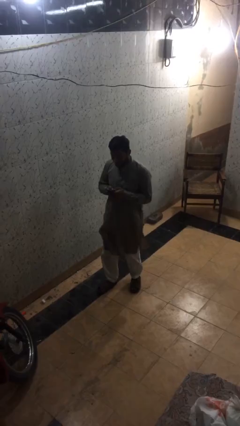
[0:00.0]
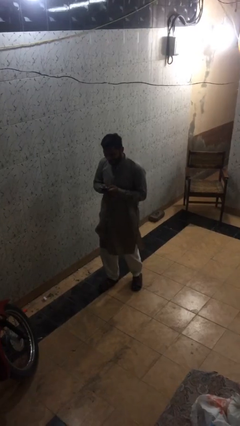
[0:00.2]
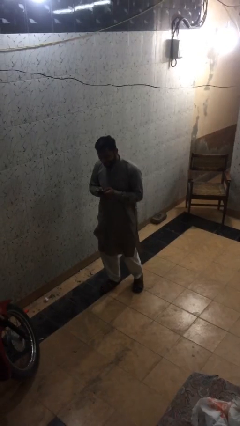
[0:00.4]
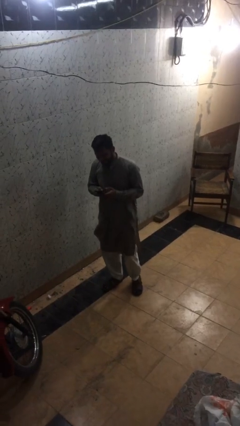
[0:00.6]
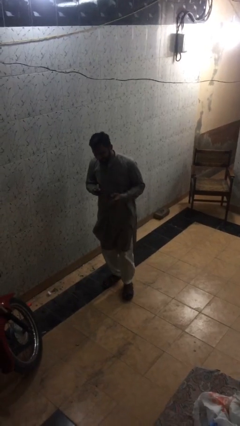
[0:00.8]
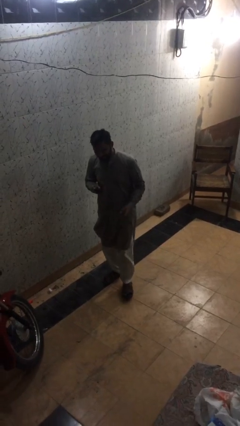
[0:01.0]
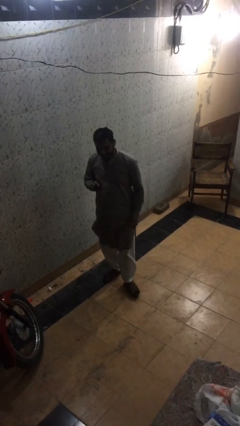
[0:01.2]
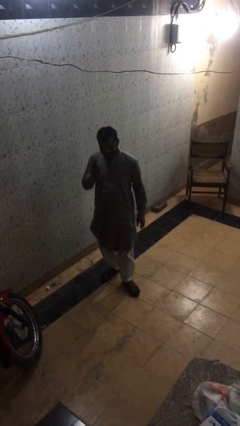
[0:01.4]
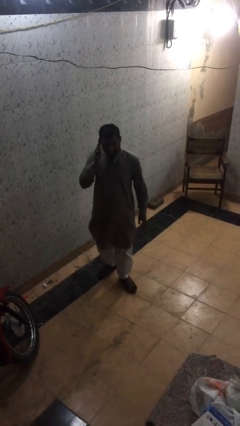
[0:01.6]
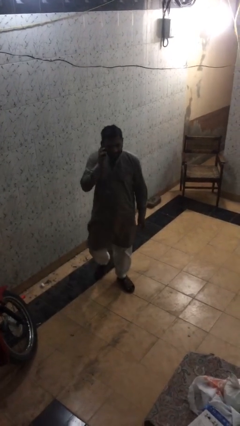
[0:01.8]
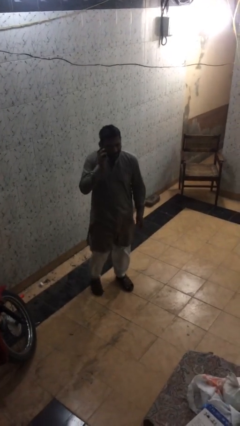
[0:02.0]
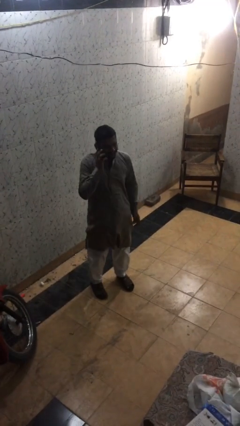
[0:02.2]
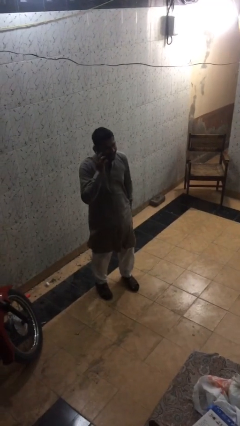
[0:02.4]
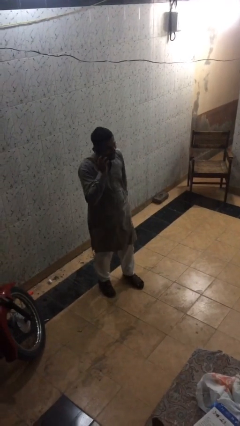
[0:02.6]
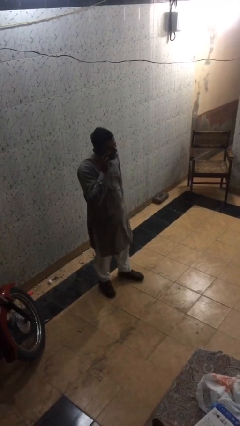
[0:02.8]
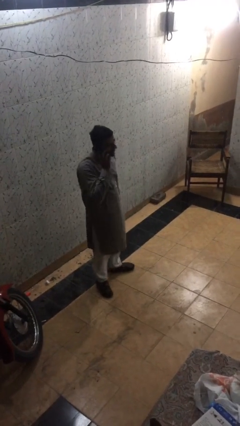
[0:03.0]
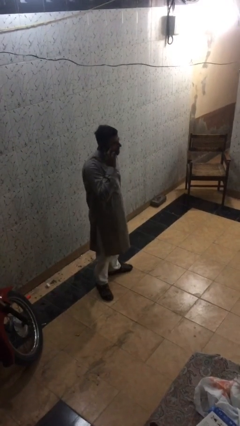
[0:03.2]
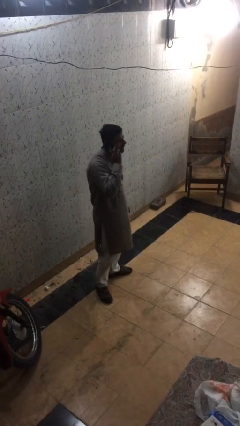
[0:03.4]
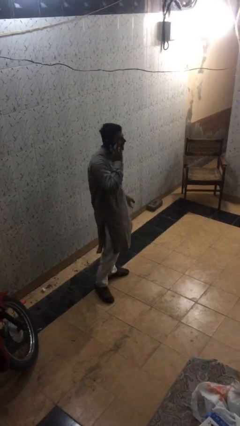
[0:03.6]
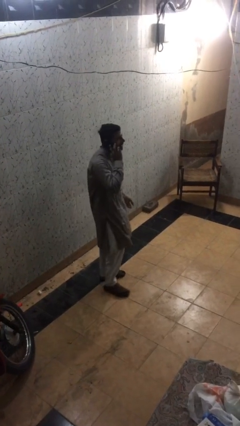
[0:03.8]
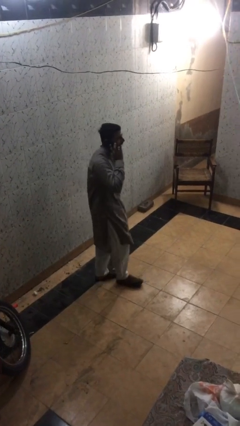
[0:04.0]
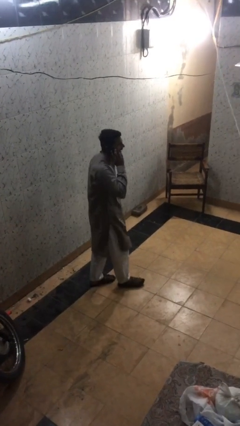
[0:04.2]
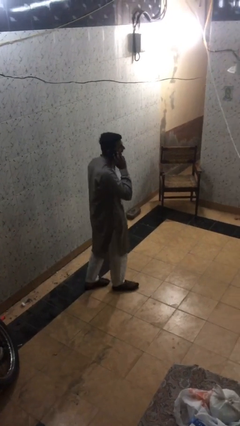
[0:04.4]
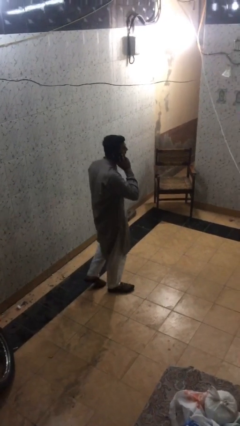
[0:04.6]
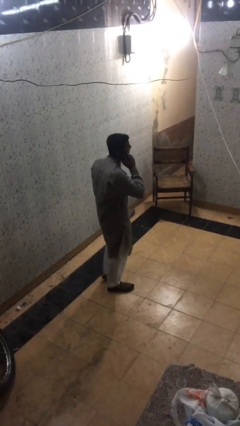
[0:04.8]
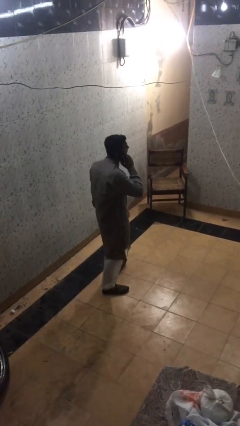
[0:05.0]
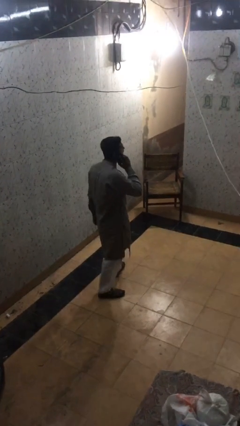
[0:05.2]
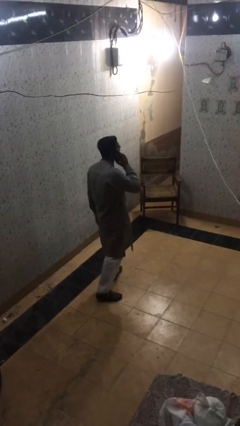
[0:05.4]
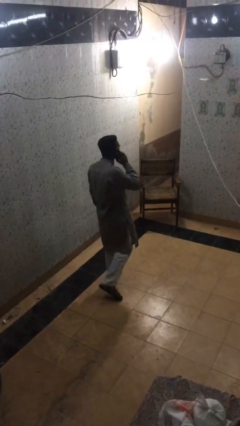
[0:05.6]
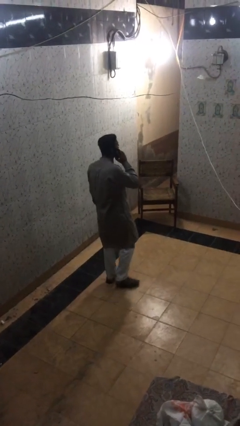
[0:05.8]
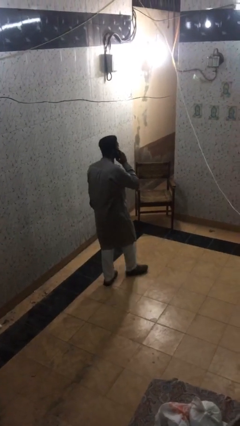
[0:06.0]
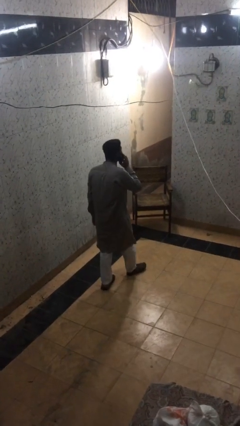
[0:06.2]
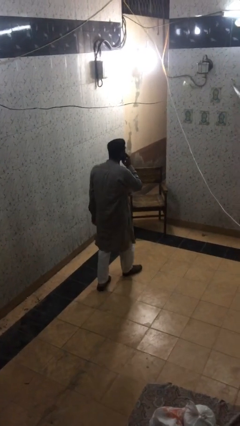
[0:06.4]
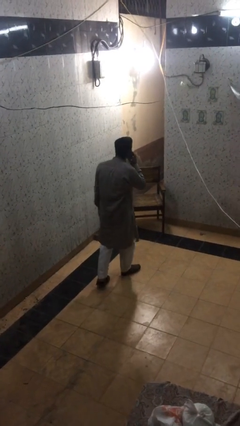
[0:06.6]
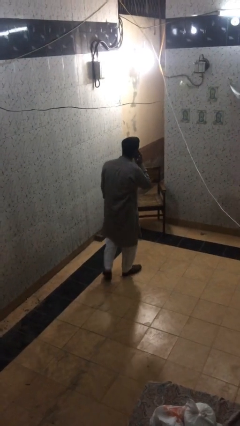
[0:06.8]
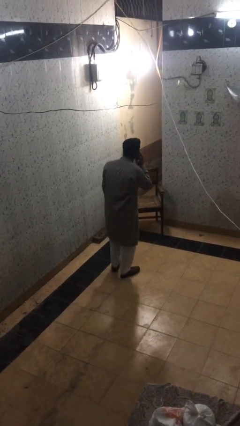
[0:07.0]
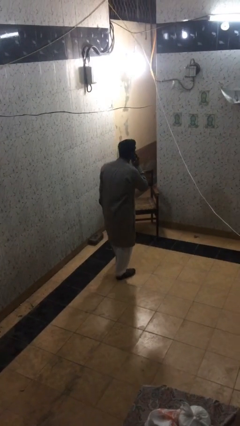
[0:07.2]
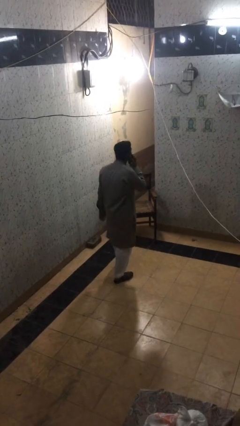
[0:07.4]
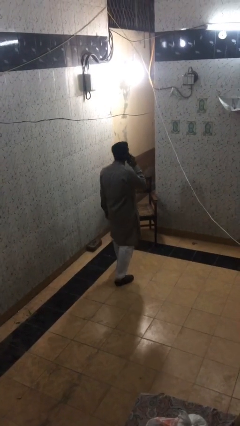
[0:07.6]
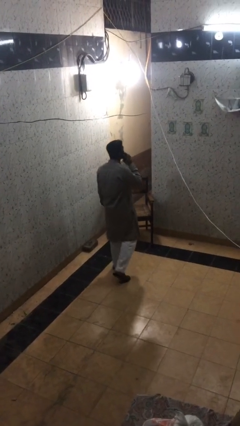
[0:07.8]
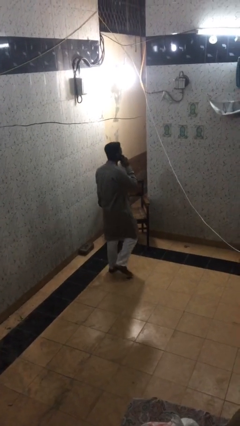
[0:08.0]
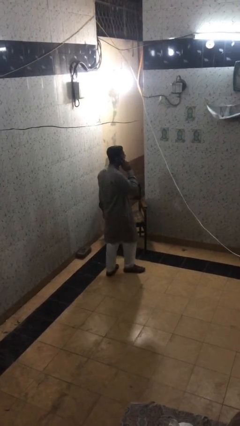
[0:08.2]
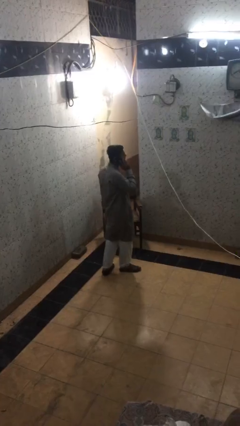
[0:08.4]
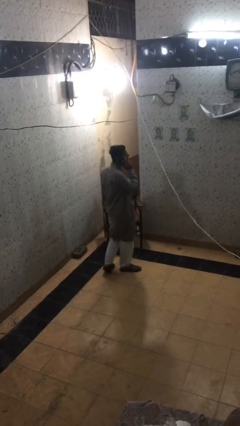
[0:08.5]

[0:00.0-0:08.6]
person talks on phone

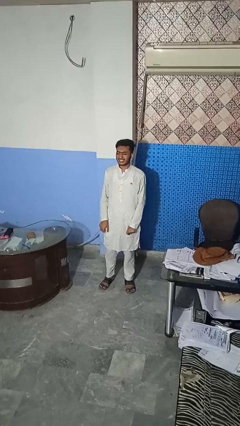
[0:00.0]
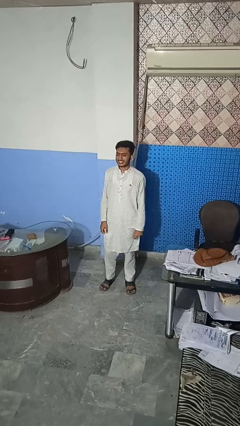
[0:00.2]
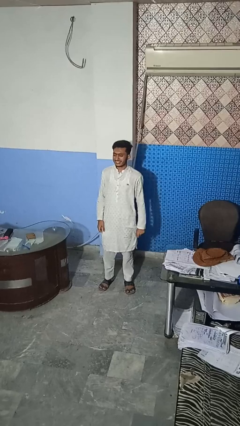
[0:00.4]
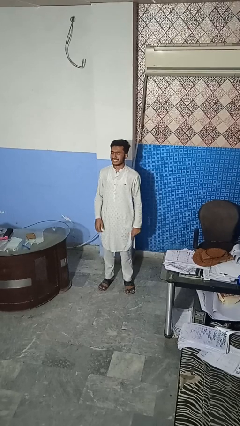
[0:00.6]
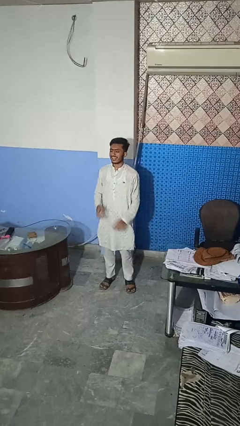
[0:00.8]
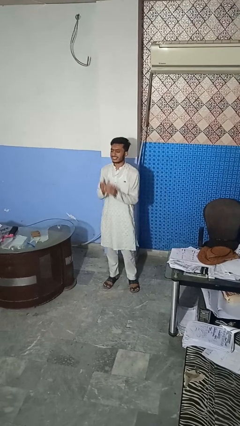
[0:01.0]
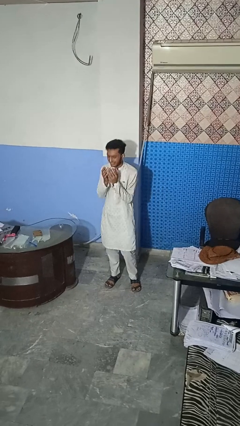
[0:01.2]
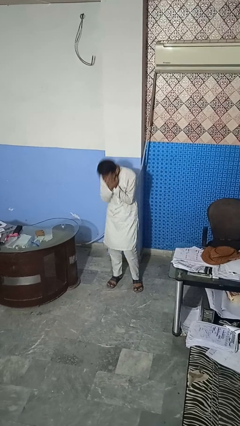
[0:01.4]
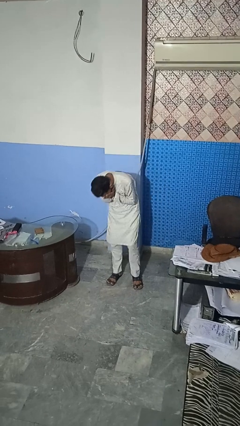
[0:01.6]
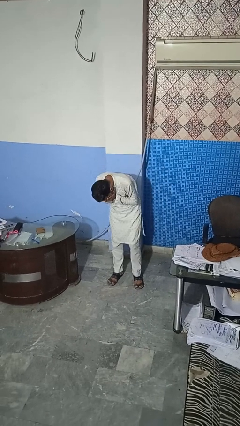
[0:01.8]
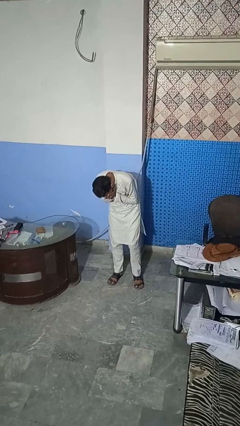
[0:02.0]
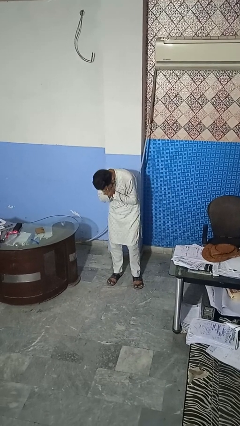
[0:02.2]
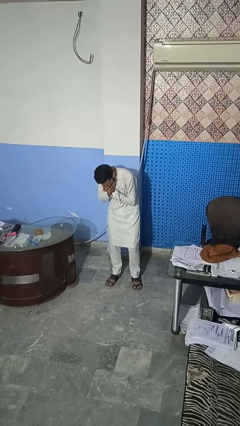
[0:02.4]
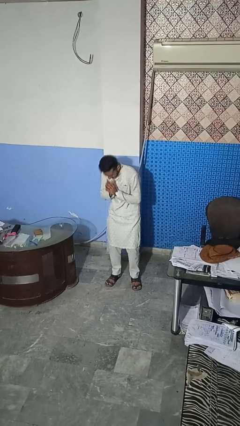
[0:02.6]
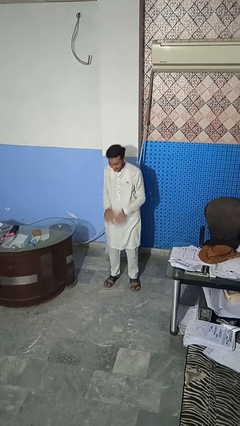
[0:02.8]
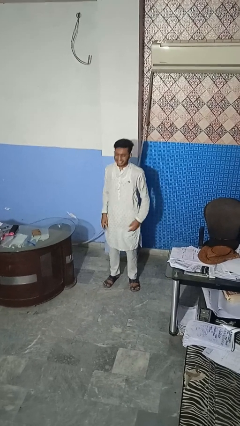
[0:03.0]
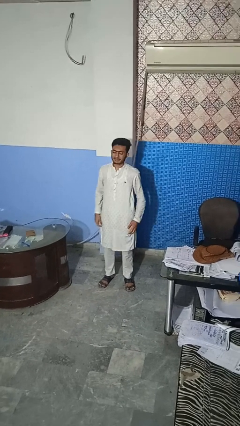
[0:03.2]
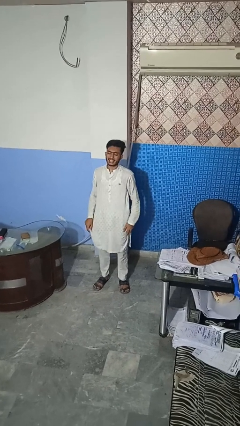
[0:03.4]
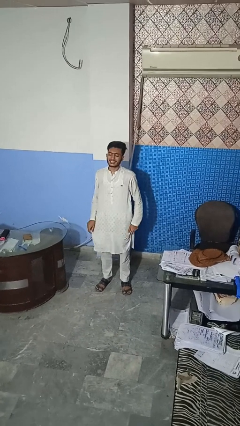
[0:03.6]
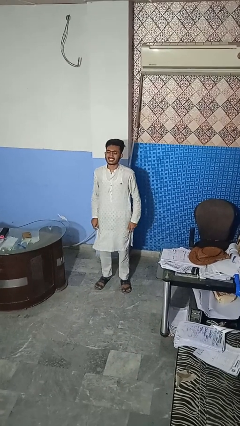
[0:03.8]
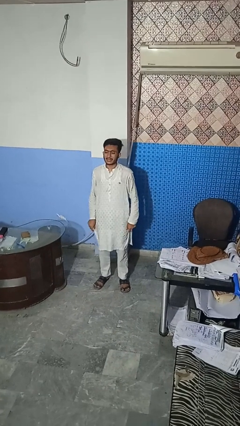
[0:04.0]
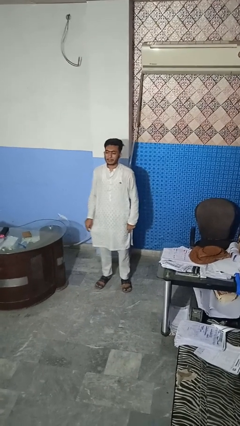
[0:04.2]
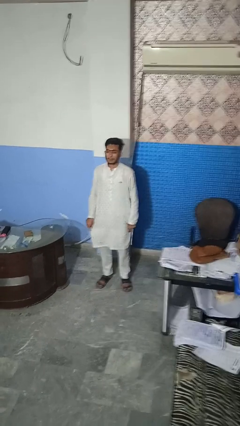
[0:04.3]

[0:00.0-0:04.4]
person sneezes into hand

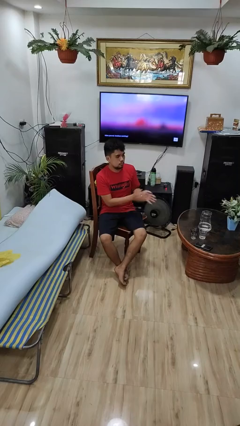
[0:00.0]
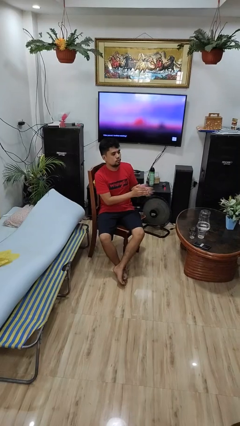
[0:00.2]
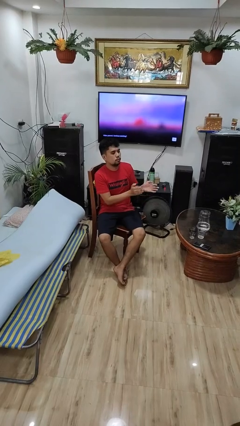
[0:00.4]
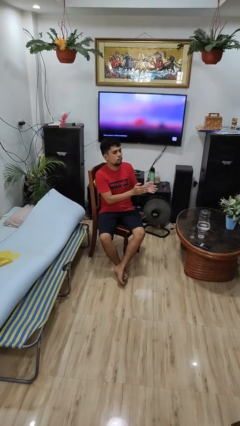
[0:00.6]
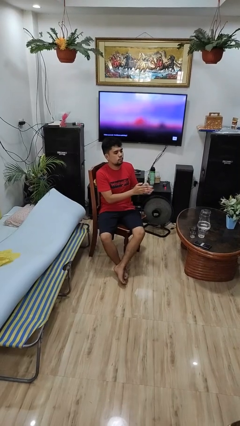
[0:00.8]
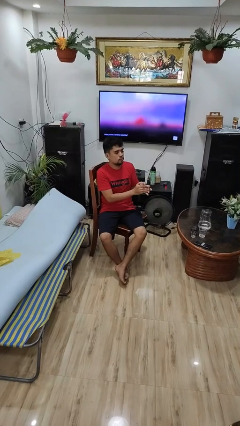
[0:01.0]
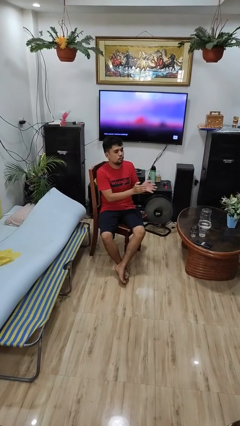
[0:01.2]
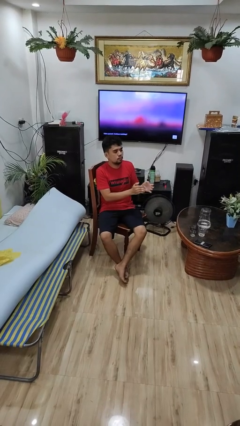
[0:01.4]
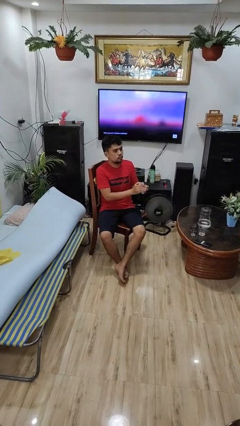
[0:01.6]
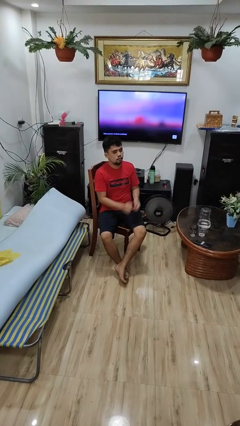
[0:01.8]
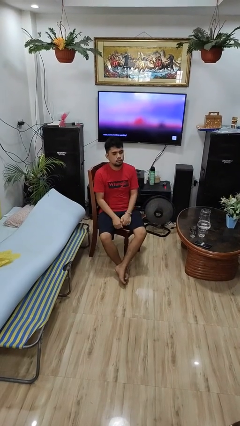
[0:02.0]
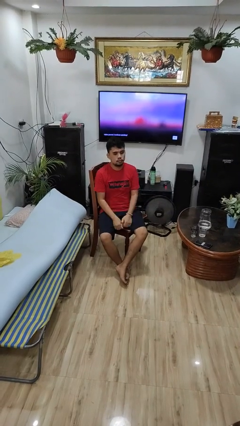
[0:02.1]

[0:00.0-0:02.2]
person claps hands

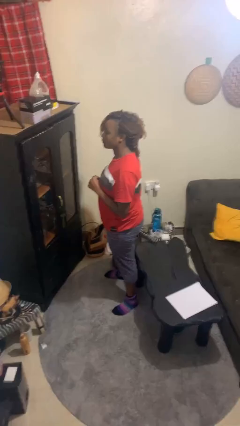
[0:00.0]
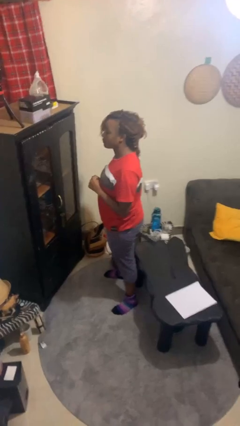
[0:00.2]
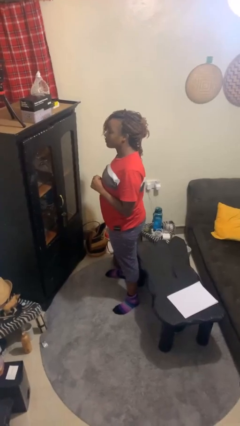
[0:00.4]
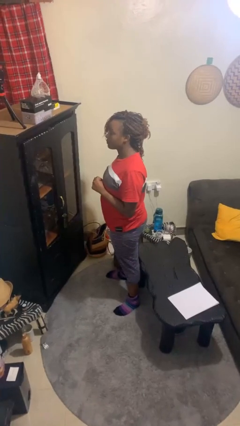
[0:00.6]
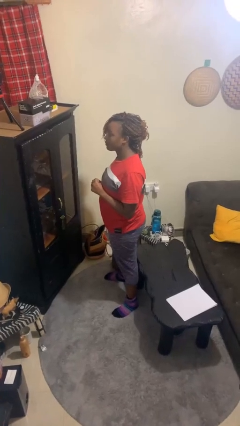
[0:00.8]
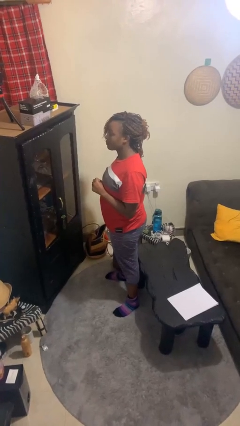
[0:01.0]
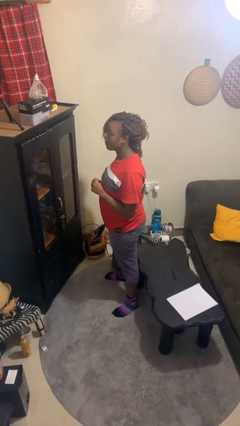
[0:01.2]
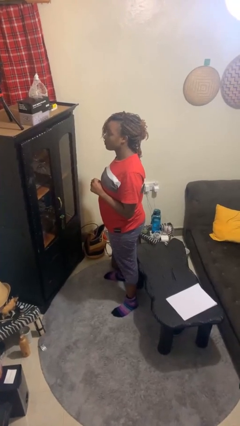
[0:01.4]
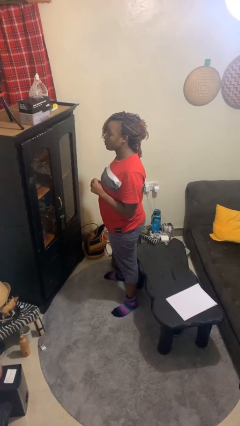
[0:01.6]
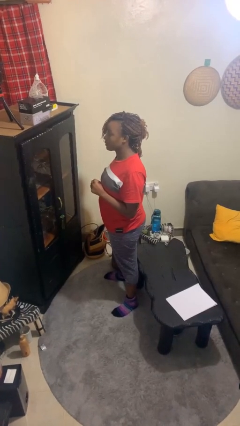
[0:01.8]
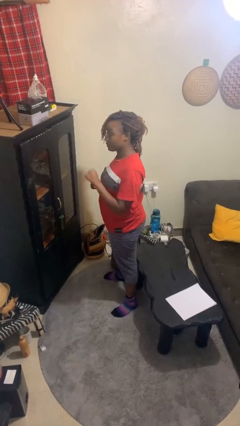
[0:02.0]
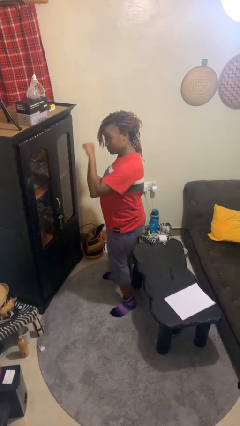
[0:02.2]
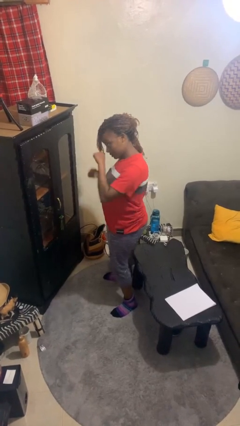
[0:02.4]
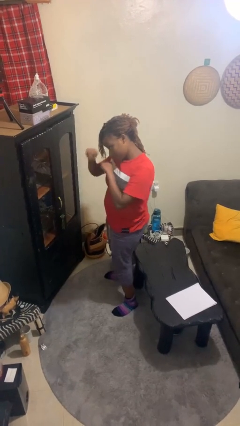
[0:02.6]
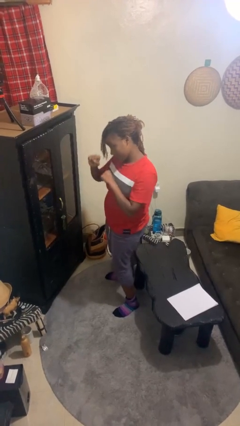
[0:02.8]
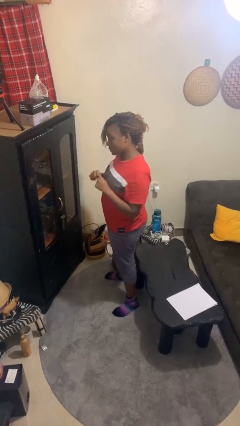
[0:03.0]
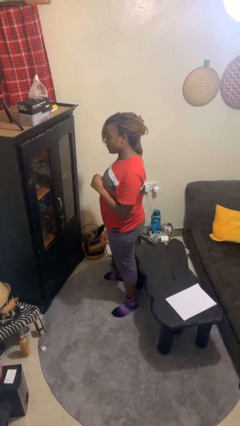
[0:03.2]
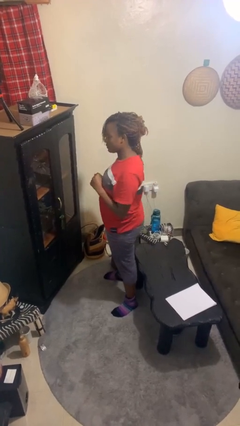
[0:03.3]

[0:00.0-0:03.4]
person punches
